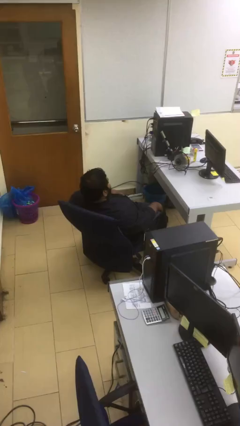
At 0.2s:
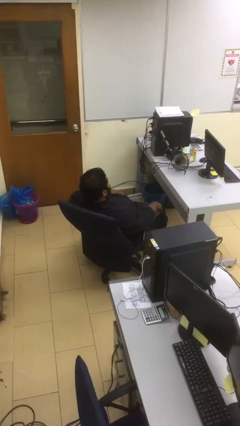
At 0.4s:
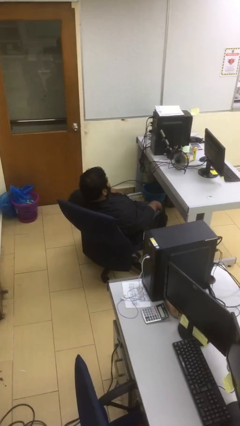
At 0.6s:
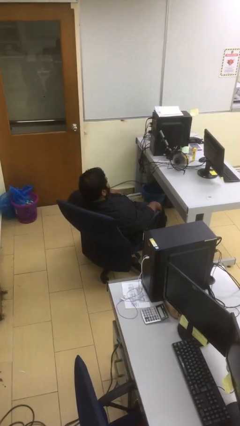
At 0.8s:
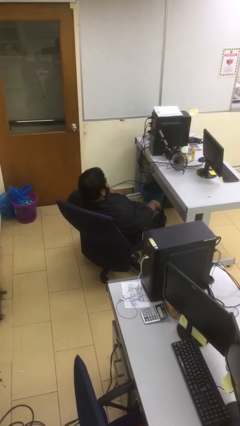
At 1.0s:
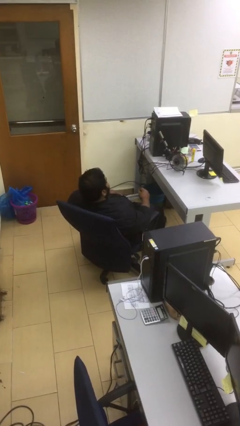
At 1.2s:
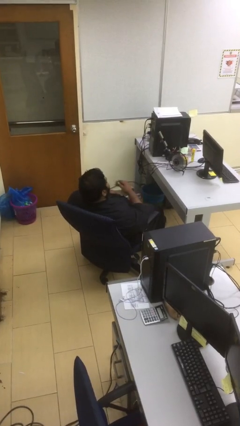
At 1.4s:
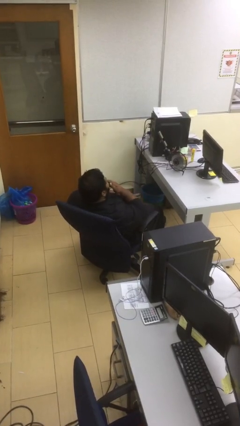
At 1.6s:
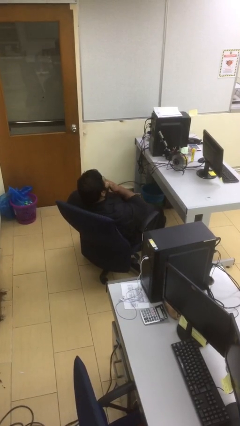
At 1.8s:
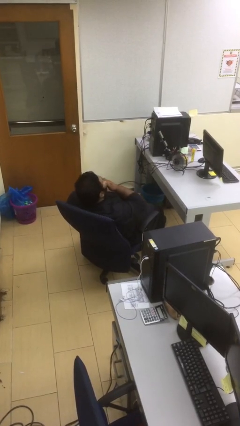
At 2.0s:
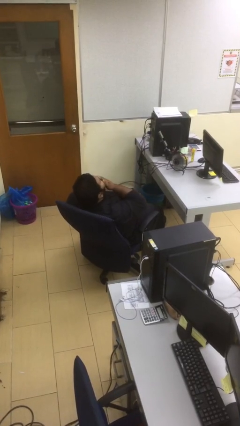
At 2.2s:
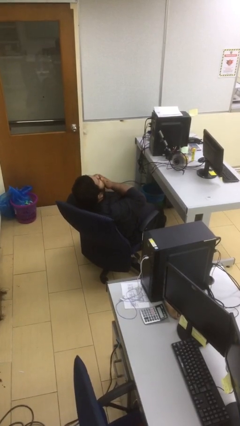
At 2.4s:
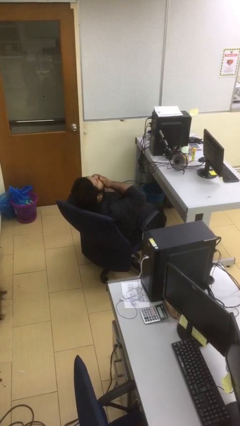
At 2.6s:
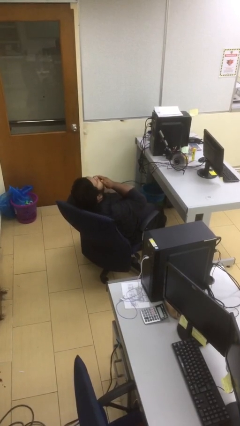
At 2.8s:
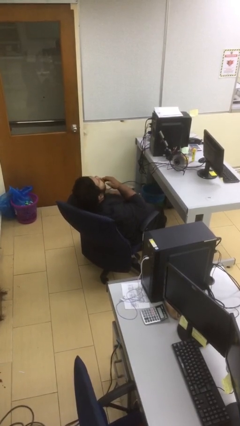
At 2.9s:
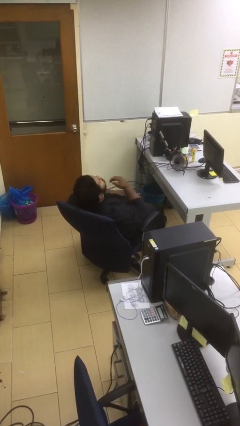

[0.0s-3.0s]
person yawns

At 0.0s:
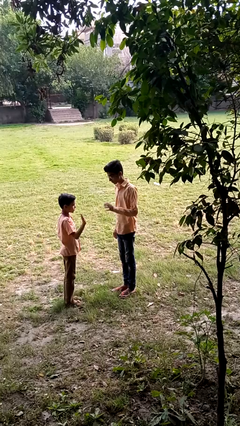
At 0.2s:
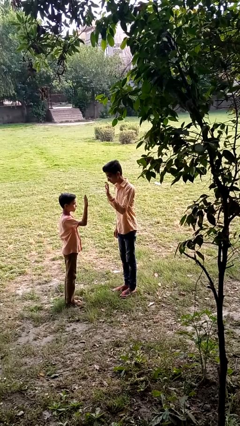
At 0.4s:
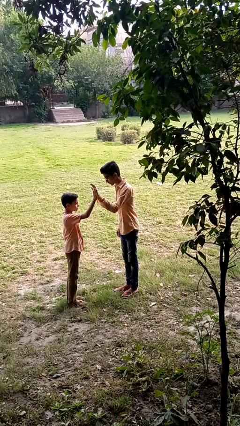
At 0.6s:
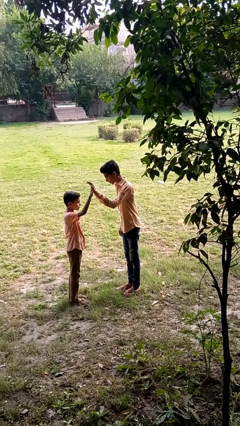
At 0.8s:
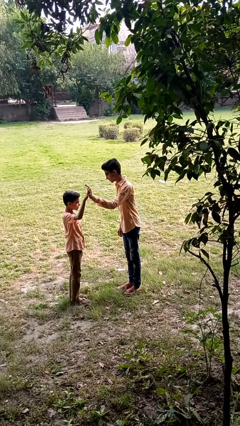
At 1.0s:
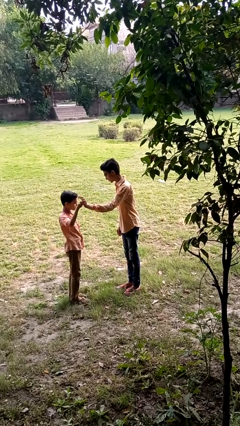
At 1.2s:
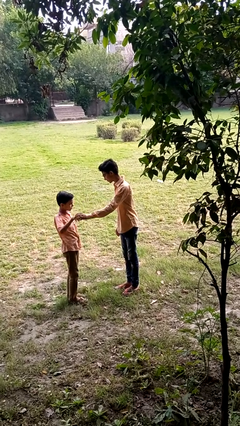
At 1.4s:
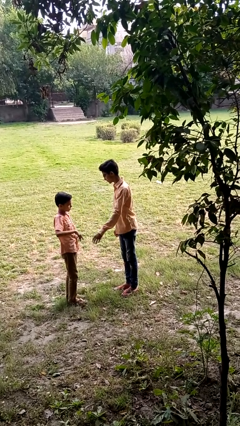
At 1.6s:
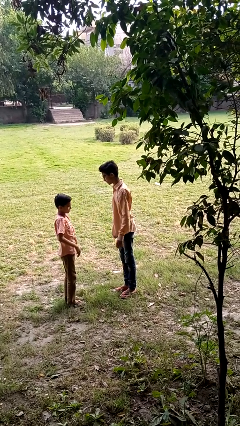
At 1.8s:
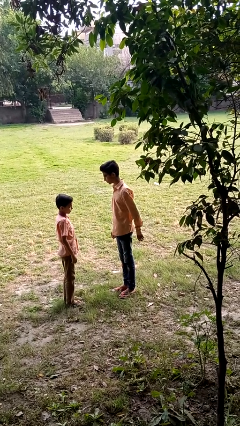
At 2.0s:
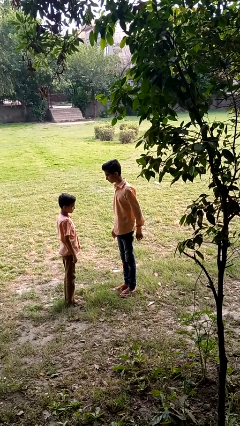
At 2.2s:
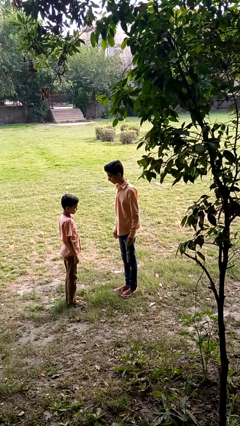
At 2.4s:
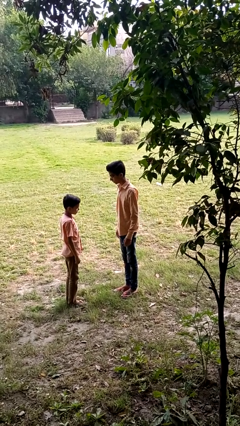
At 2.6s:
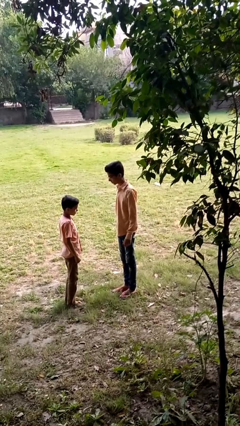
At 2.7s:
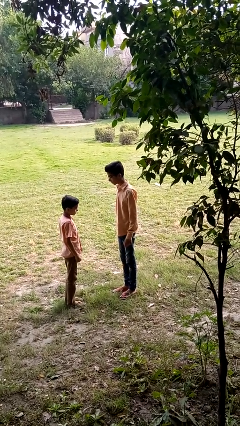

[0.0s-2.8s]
person highfives hand

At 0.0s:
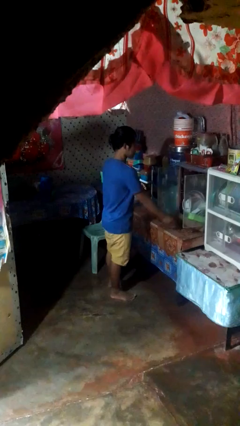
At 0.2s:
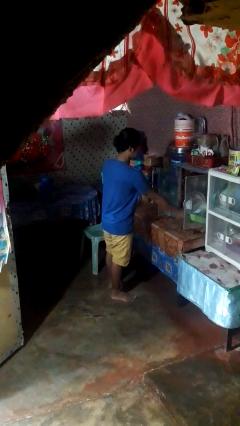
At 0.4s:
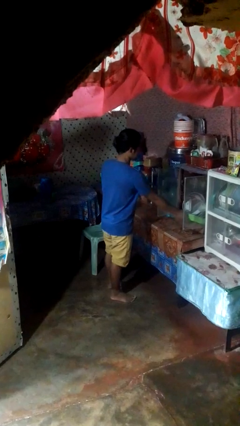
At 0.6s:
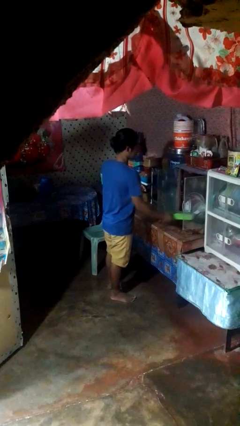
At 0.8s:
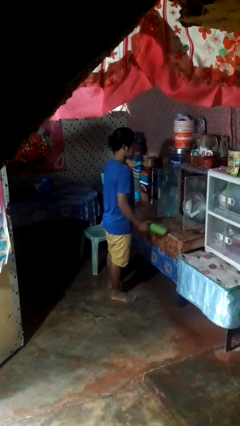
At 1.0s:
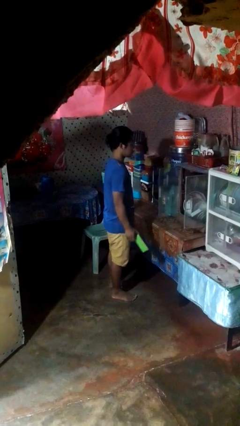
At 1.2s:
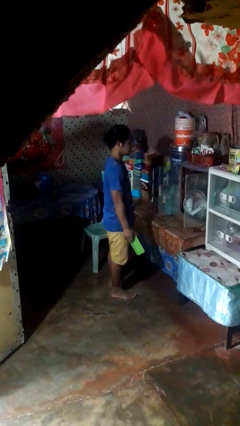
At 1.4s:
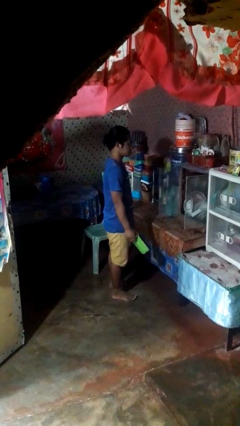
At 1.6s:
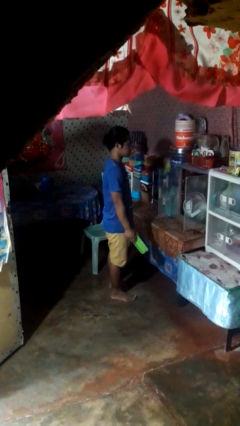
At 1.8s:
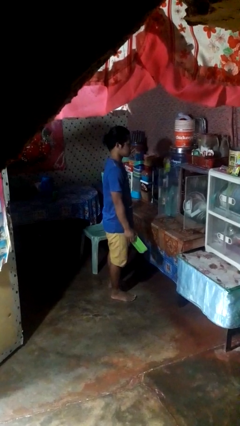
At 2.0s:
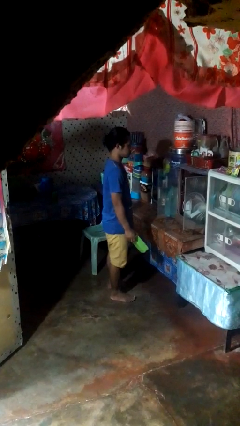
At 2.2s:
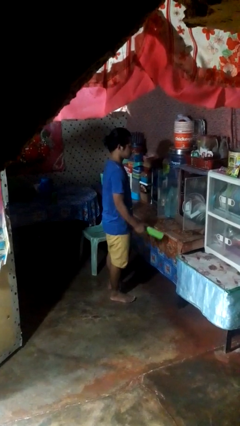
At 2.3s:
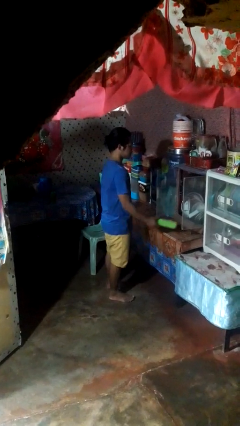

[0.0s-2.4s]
person picks up object from cabinet

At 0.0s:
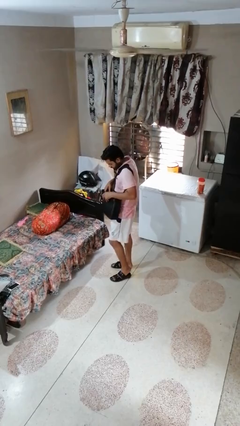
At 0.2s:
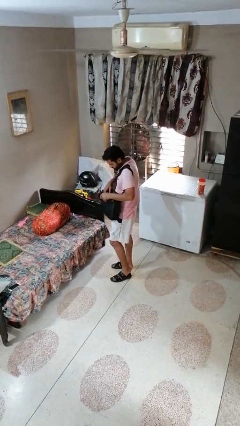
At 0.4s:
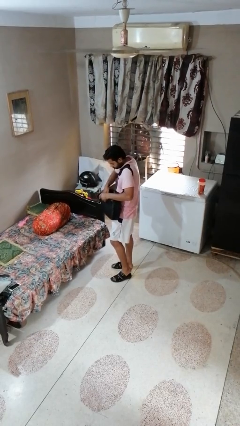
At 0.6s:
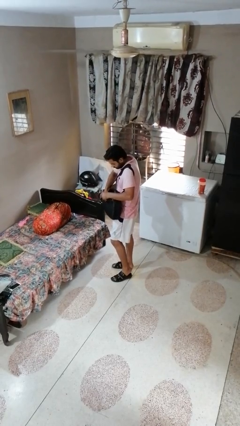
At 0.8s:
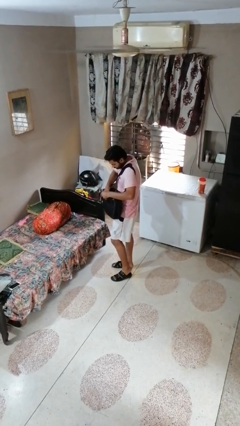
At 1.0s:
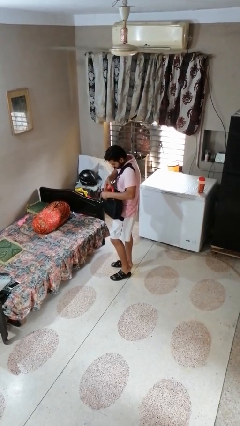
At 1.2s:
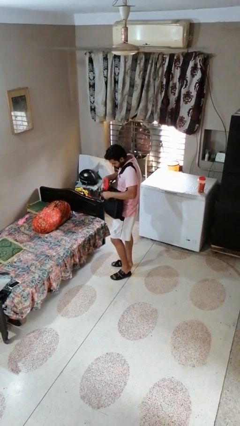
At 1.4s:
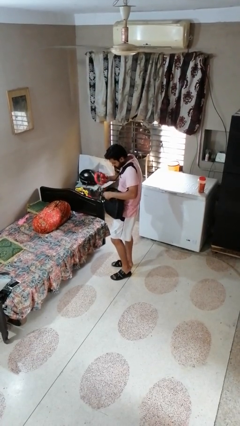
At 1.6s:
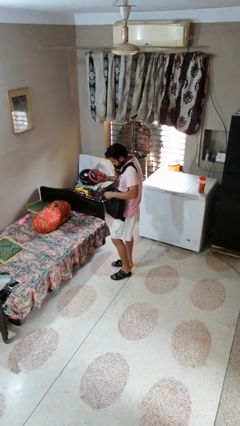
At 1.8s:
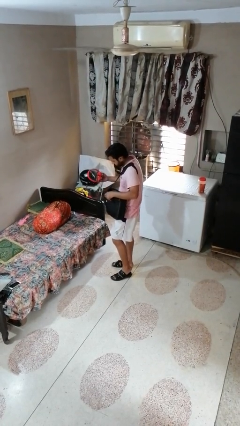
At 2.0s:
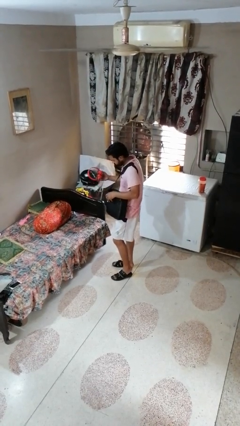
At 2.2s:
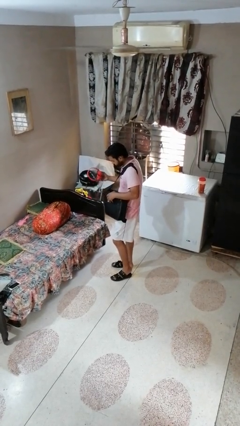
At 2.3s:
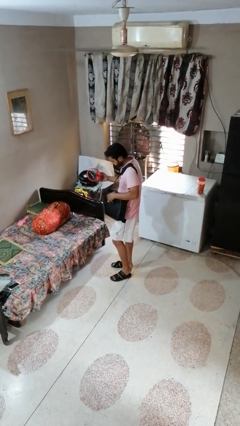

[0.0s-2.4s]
person takes object from backpack

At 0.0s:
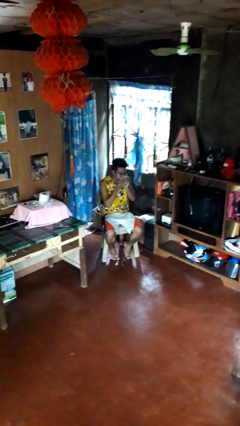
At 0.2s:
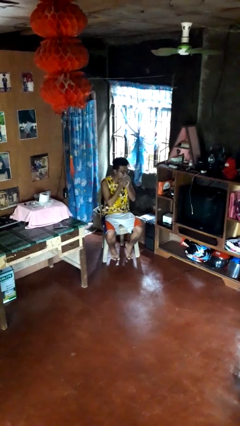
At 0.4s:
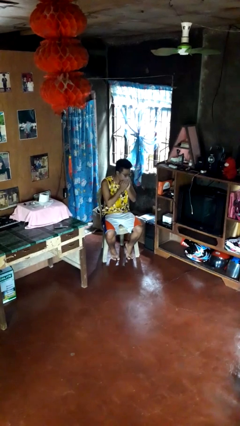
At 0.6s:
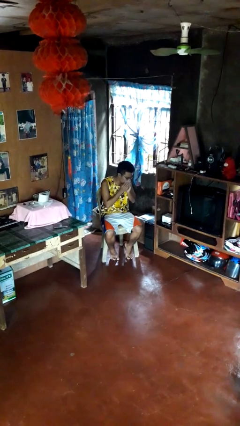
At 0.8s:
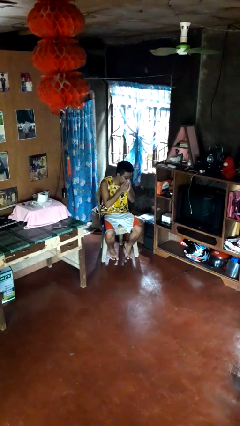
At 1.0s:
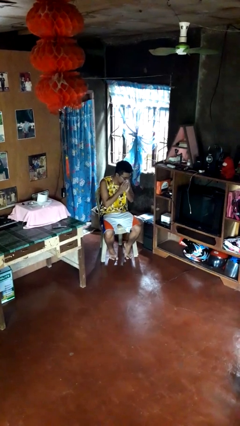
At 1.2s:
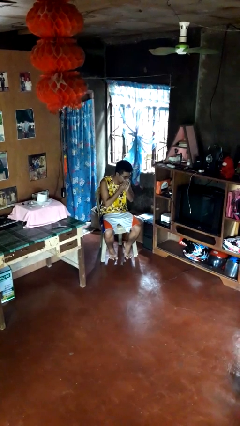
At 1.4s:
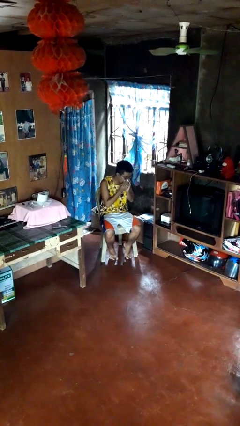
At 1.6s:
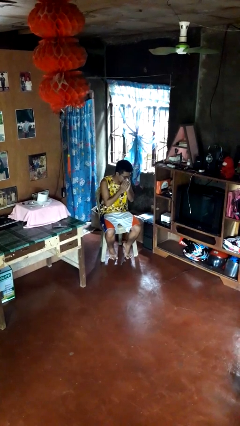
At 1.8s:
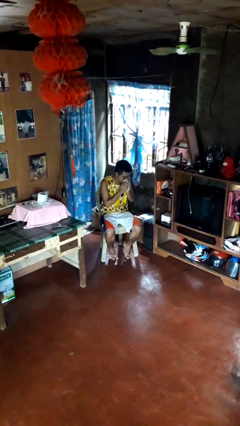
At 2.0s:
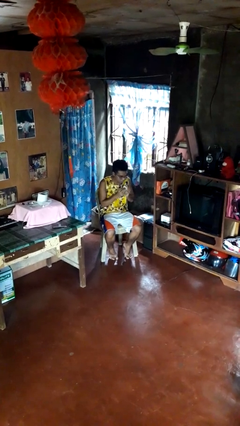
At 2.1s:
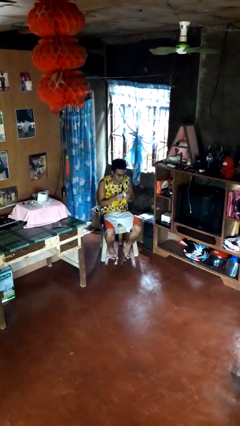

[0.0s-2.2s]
person blows nose

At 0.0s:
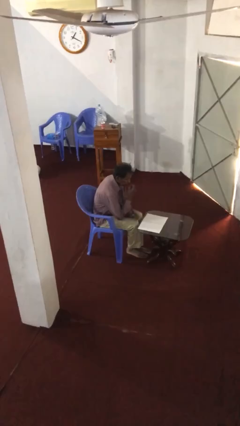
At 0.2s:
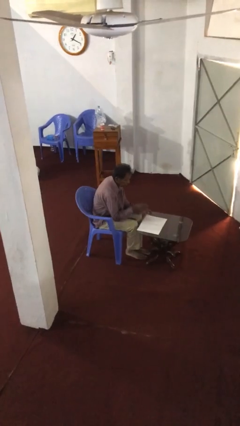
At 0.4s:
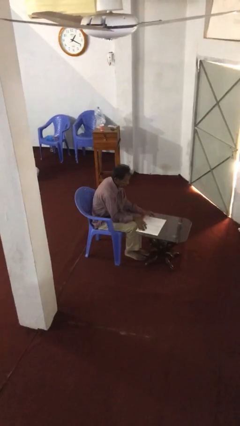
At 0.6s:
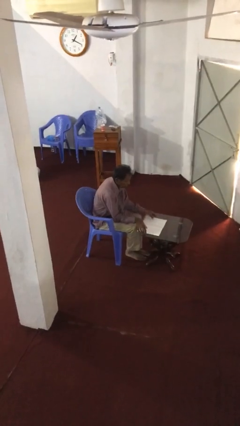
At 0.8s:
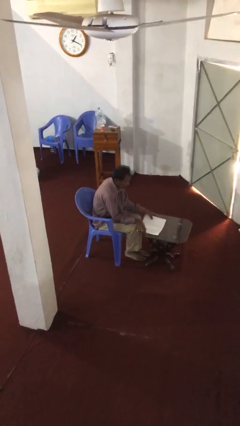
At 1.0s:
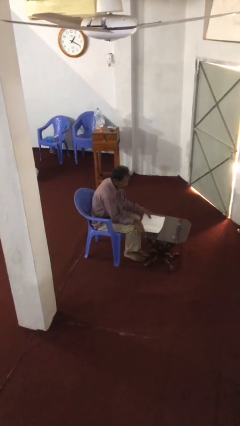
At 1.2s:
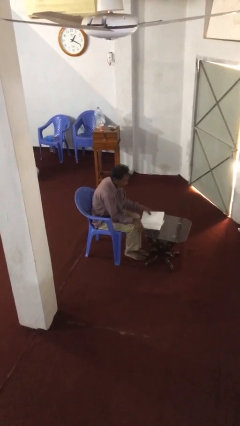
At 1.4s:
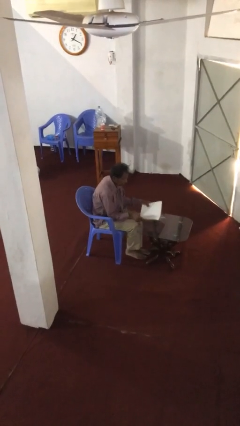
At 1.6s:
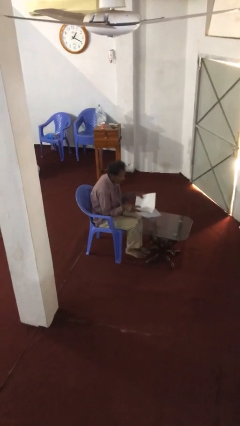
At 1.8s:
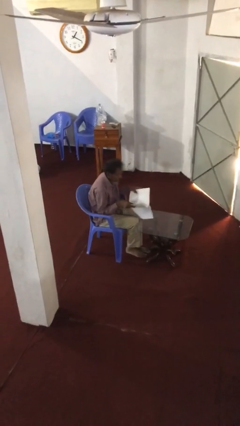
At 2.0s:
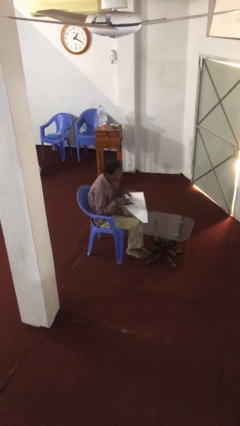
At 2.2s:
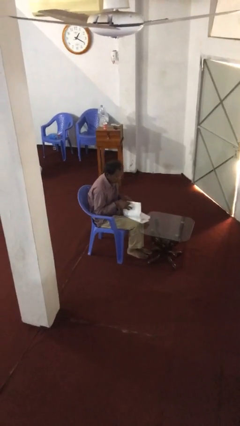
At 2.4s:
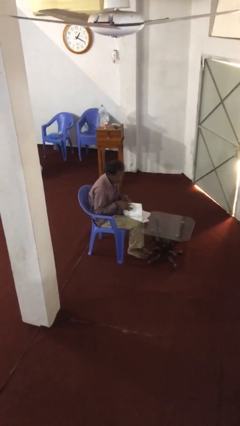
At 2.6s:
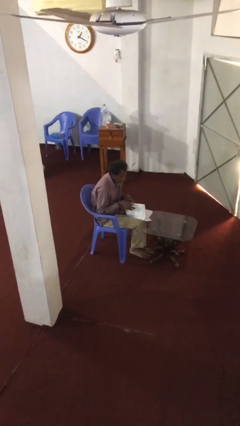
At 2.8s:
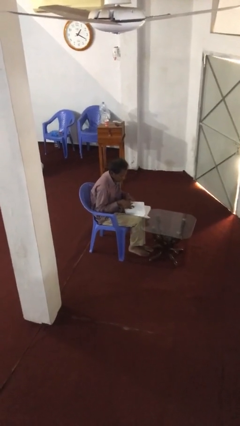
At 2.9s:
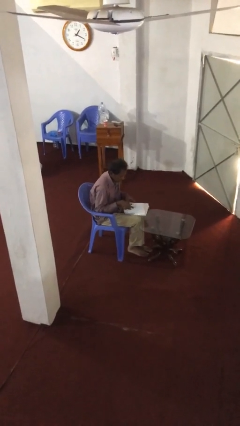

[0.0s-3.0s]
person picks up object from table

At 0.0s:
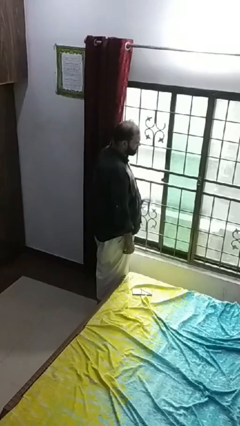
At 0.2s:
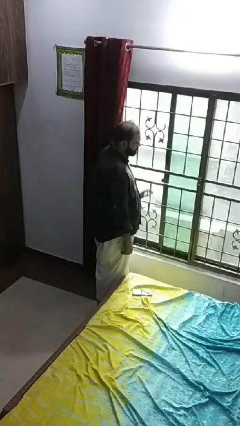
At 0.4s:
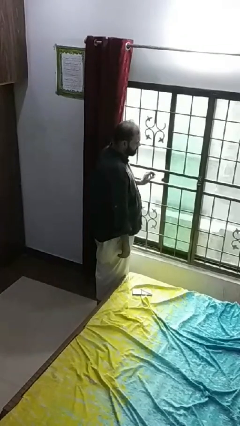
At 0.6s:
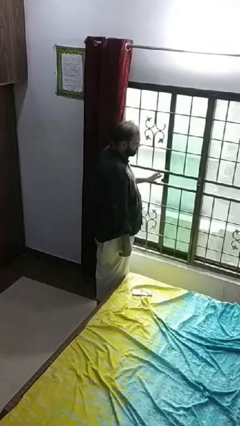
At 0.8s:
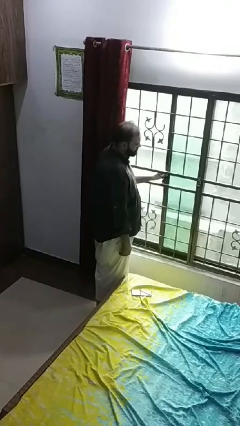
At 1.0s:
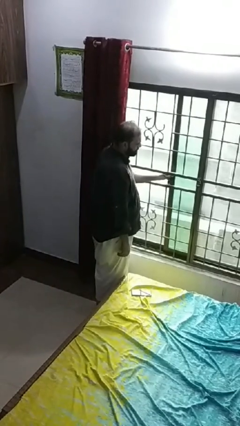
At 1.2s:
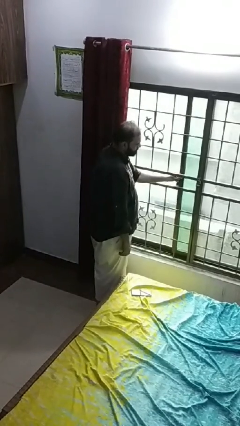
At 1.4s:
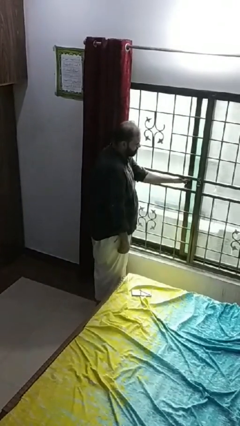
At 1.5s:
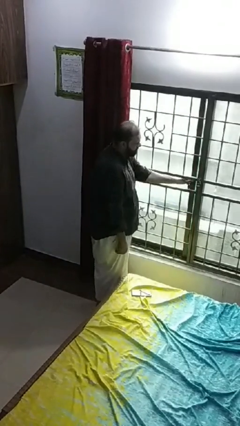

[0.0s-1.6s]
person closes home window
